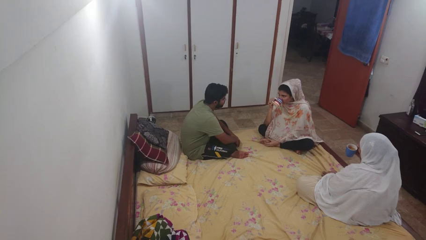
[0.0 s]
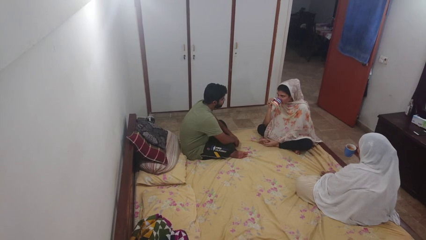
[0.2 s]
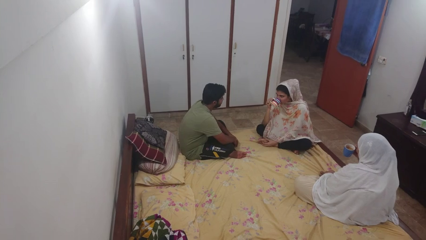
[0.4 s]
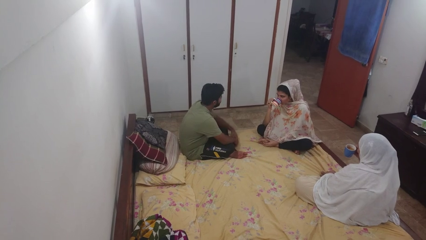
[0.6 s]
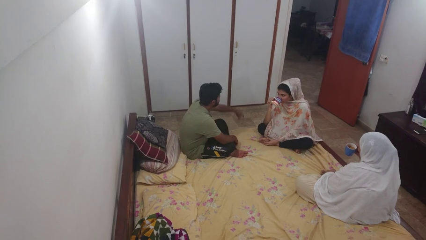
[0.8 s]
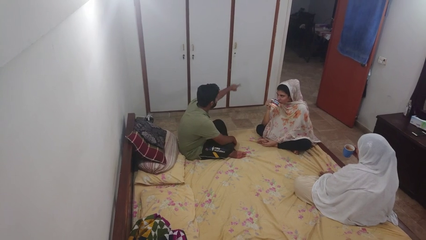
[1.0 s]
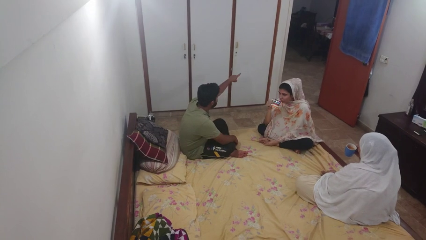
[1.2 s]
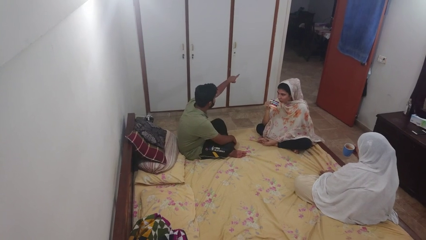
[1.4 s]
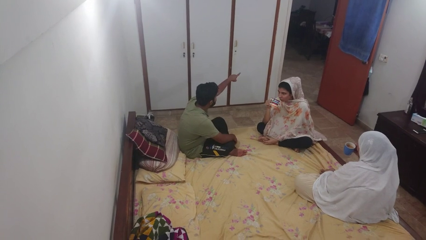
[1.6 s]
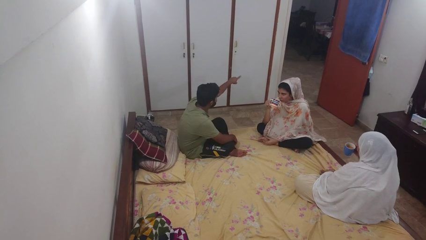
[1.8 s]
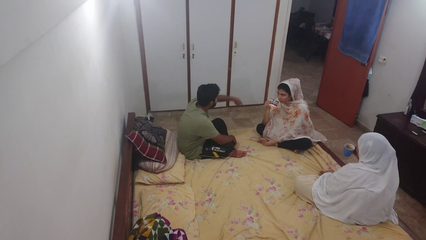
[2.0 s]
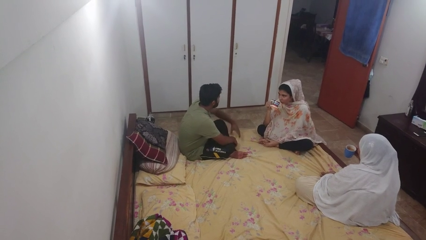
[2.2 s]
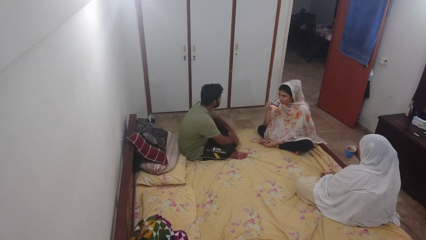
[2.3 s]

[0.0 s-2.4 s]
person points at person

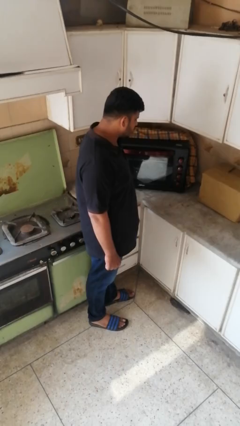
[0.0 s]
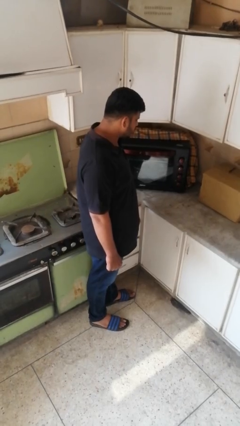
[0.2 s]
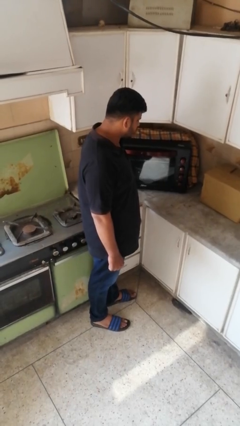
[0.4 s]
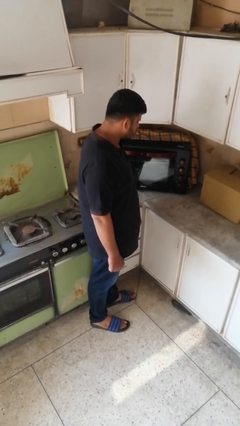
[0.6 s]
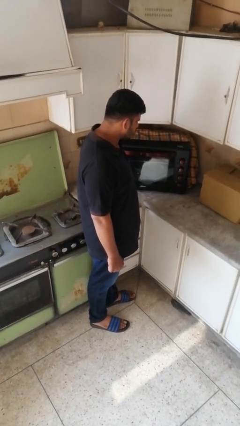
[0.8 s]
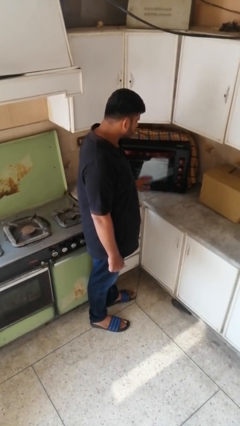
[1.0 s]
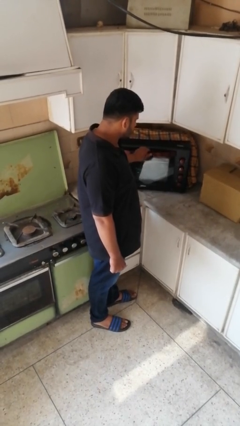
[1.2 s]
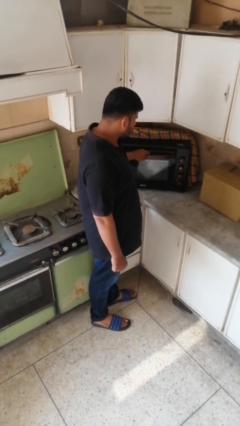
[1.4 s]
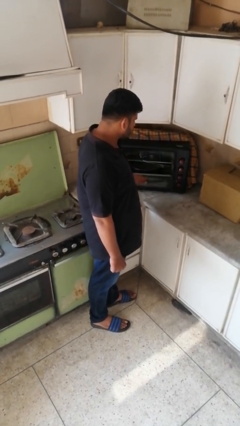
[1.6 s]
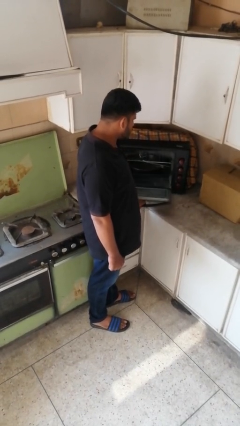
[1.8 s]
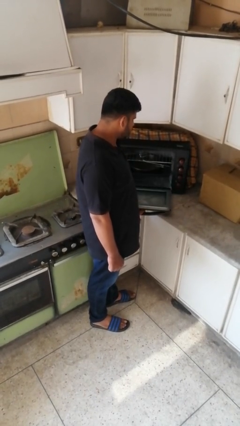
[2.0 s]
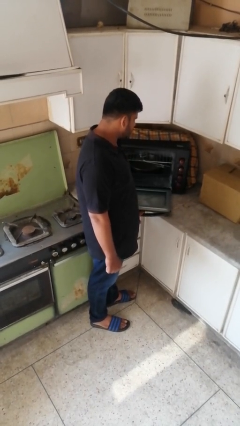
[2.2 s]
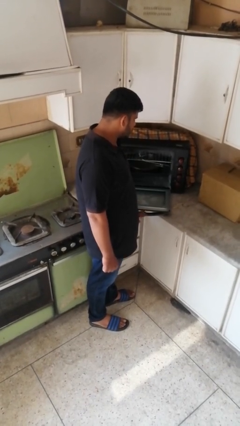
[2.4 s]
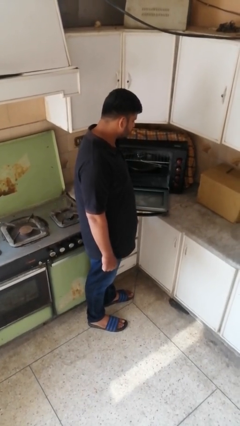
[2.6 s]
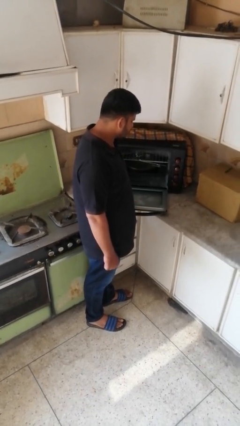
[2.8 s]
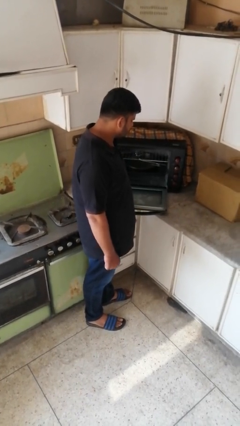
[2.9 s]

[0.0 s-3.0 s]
person opens oven door

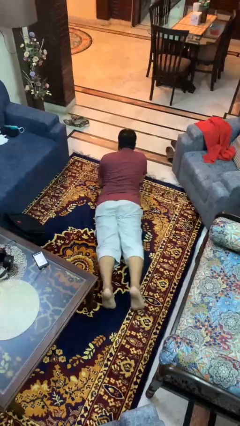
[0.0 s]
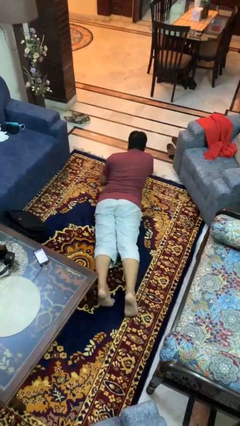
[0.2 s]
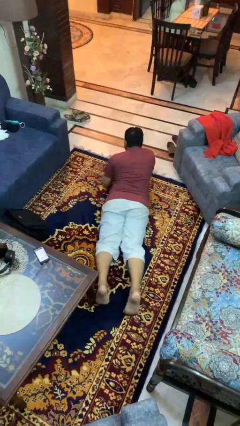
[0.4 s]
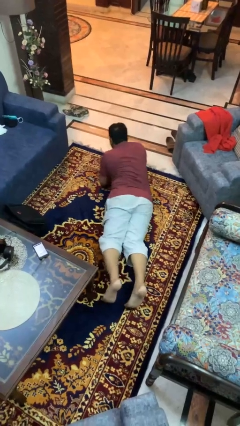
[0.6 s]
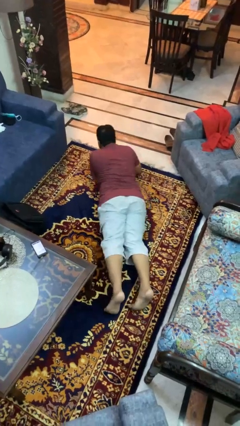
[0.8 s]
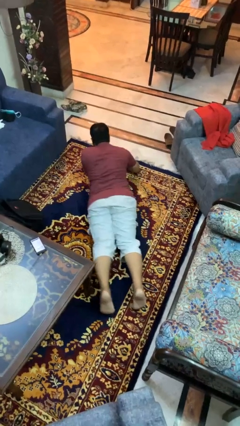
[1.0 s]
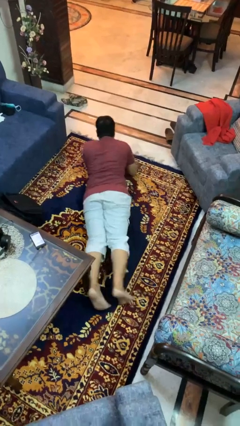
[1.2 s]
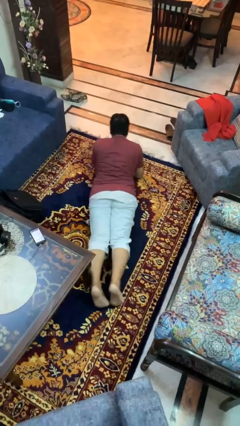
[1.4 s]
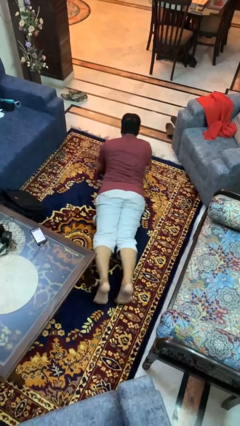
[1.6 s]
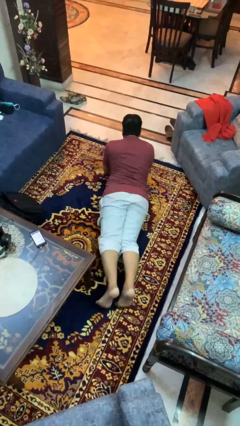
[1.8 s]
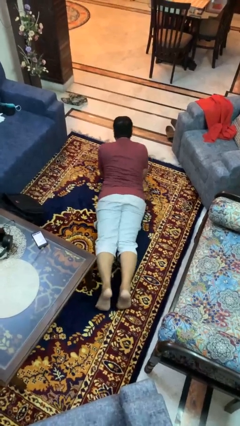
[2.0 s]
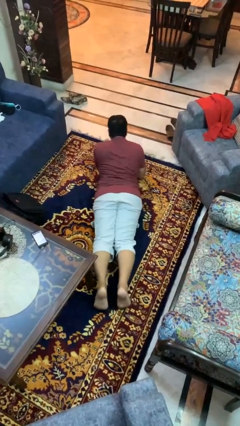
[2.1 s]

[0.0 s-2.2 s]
person crawls

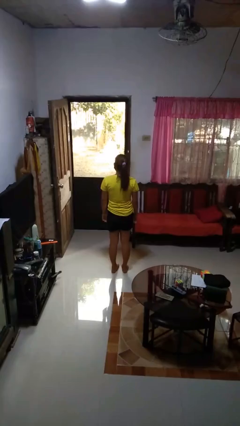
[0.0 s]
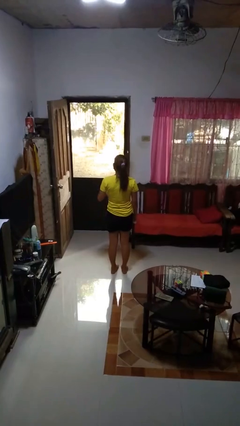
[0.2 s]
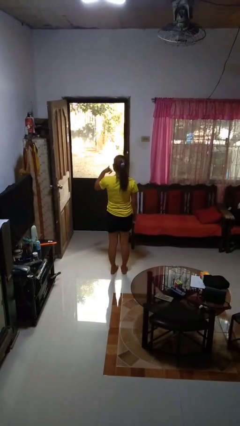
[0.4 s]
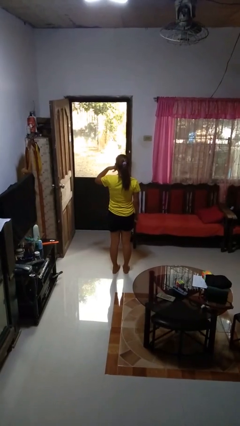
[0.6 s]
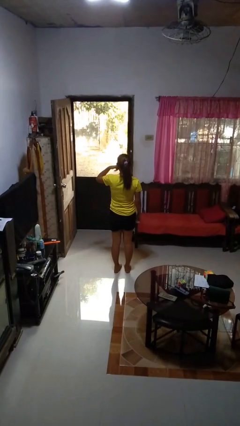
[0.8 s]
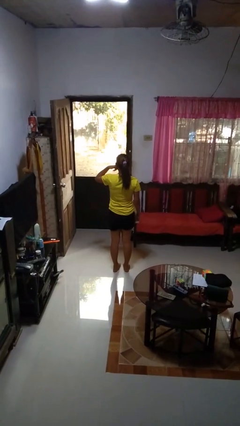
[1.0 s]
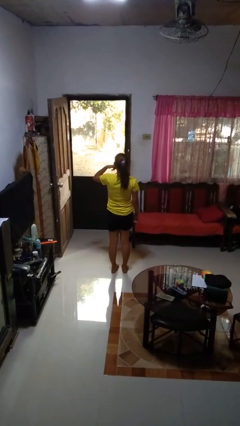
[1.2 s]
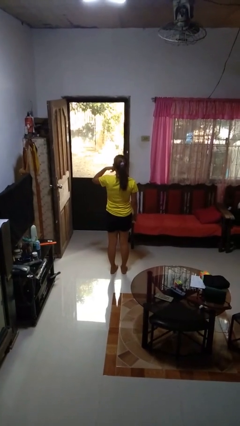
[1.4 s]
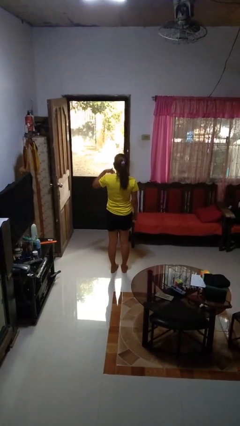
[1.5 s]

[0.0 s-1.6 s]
person gestures call me

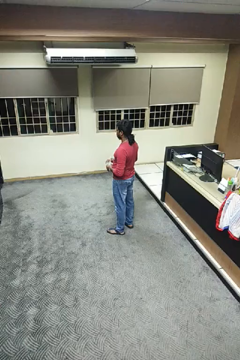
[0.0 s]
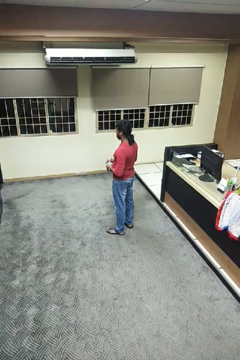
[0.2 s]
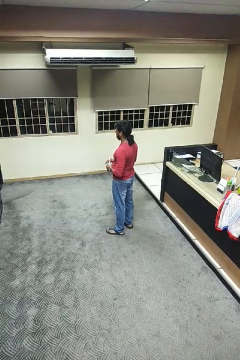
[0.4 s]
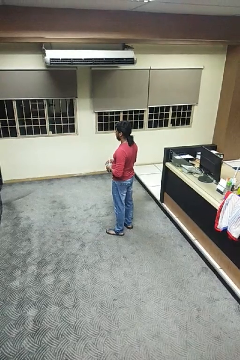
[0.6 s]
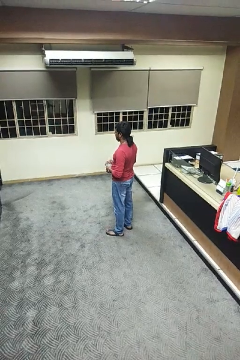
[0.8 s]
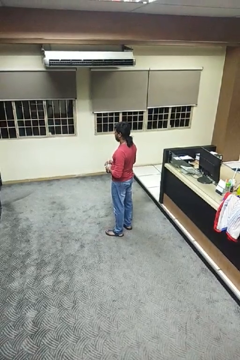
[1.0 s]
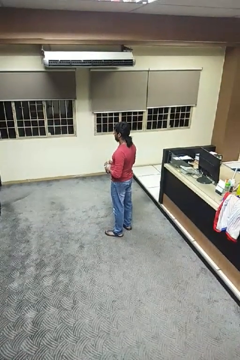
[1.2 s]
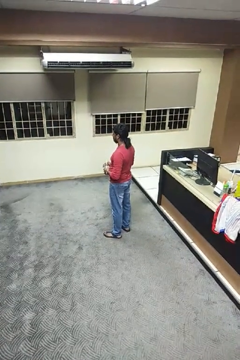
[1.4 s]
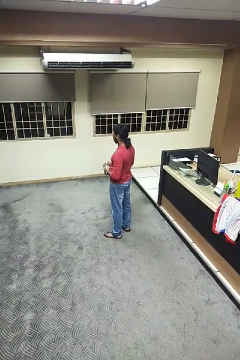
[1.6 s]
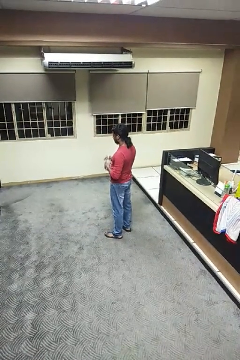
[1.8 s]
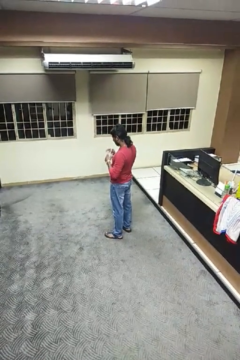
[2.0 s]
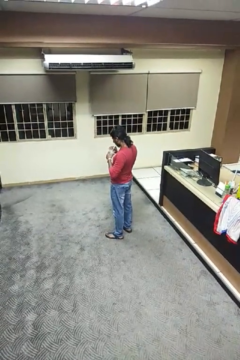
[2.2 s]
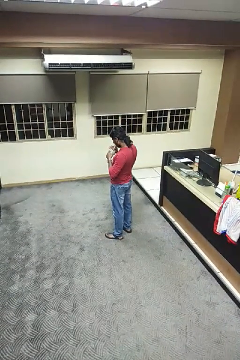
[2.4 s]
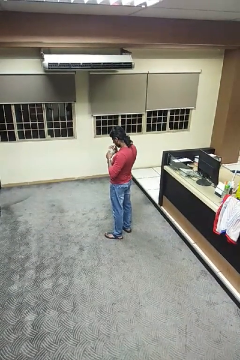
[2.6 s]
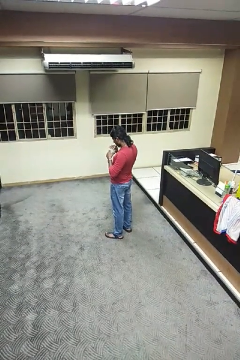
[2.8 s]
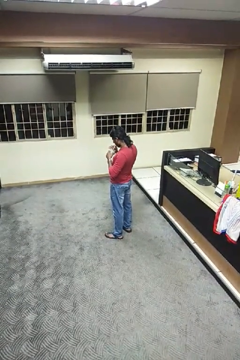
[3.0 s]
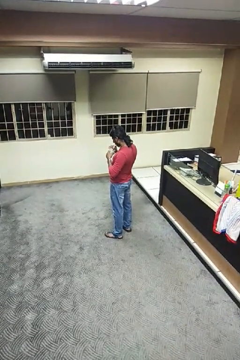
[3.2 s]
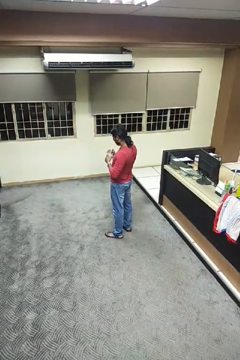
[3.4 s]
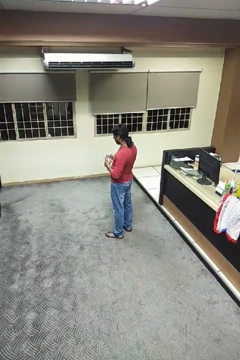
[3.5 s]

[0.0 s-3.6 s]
person drinks from straw

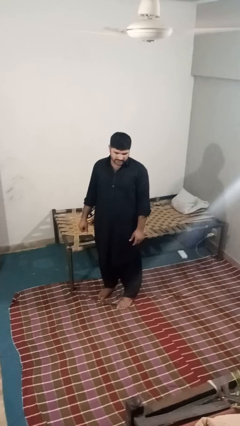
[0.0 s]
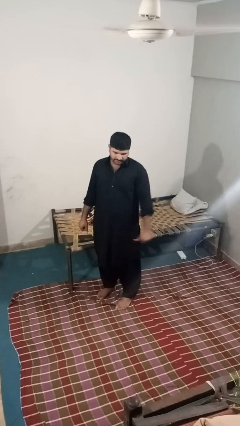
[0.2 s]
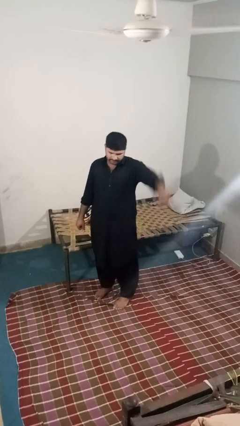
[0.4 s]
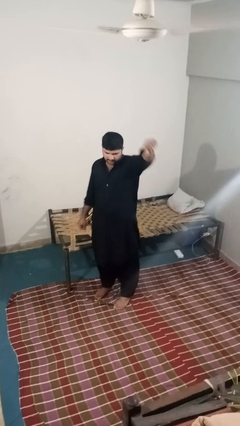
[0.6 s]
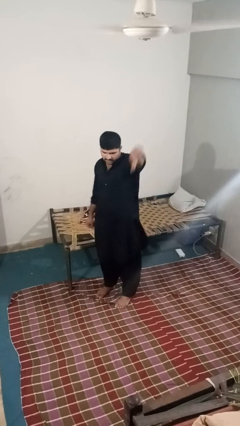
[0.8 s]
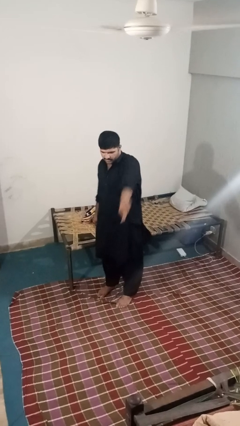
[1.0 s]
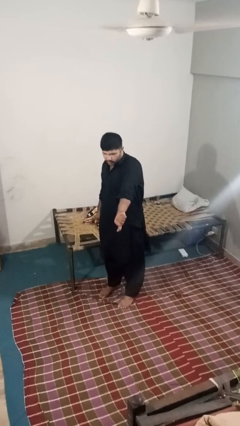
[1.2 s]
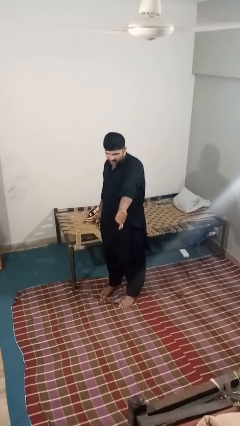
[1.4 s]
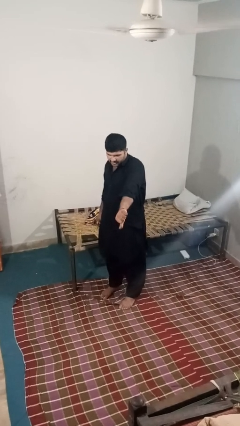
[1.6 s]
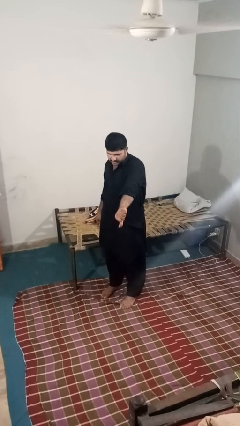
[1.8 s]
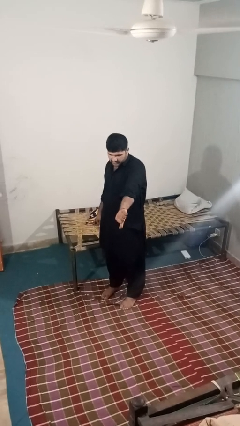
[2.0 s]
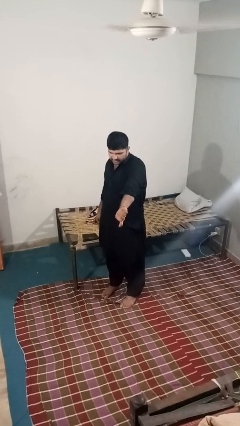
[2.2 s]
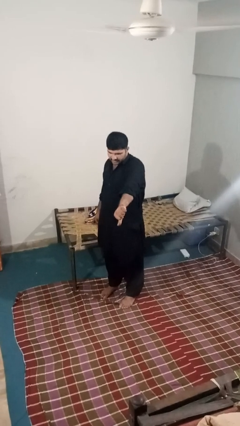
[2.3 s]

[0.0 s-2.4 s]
person gestures thumbs down

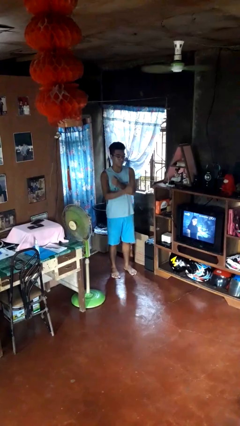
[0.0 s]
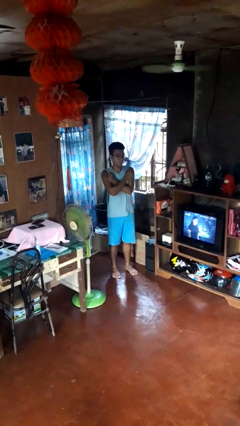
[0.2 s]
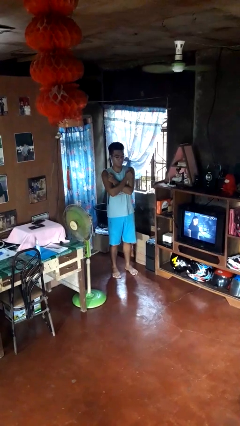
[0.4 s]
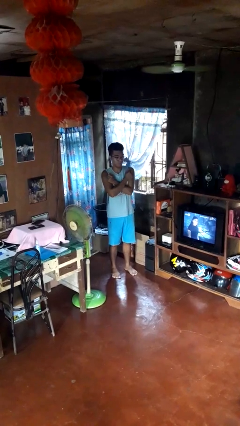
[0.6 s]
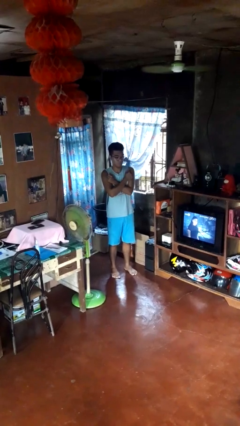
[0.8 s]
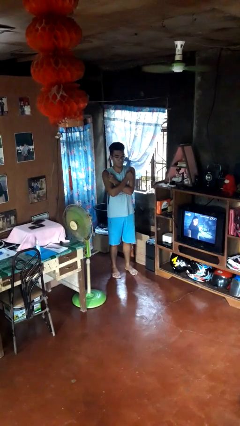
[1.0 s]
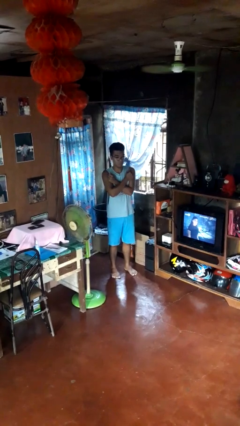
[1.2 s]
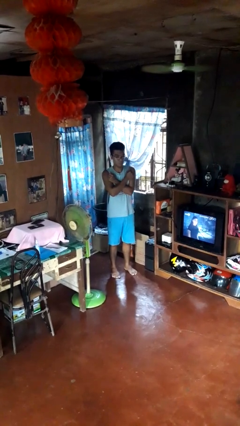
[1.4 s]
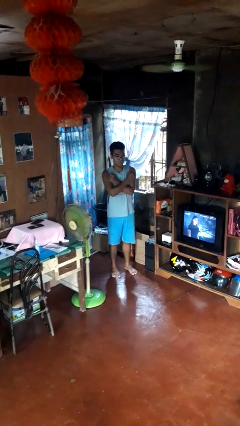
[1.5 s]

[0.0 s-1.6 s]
person gestures arms x

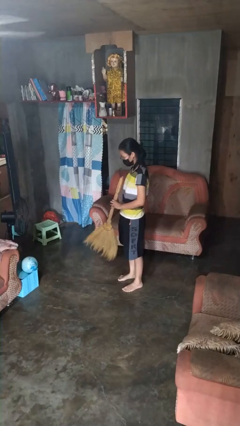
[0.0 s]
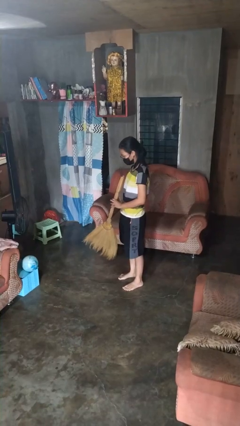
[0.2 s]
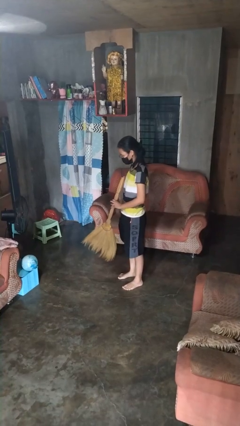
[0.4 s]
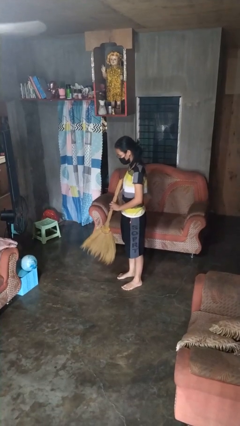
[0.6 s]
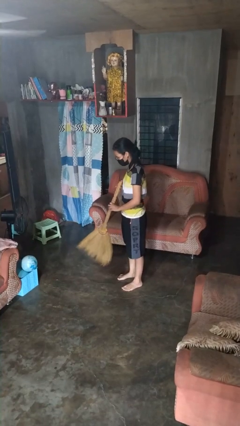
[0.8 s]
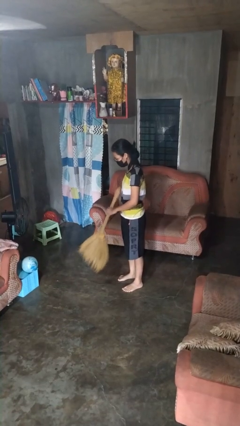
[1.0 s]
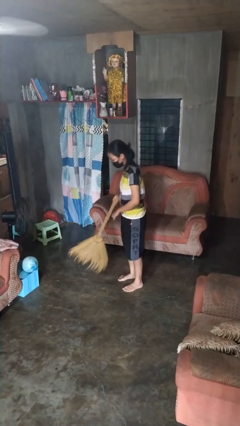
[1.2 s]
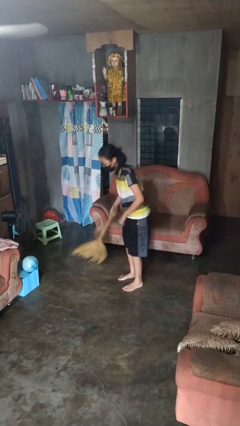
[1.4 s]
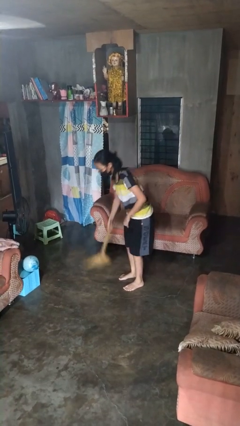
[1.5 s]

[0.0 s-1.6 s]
person sweeps floor
